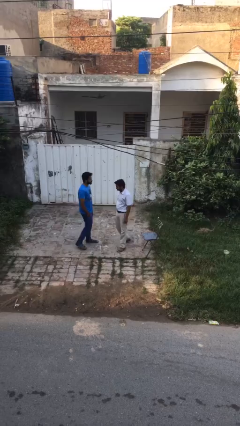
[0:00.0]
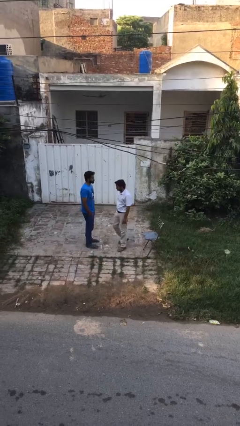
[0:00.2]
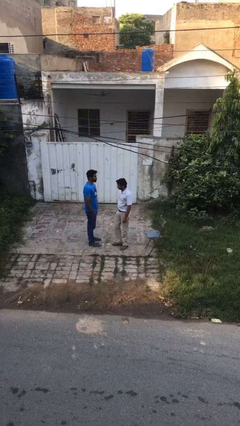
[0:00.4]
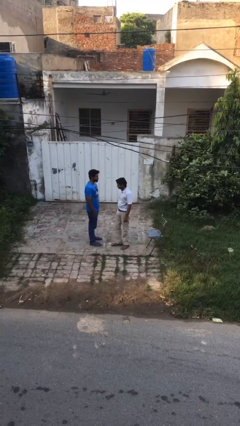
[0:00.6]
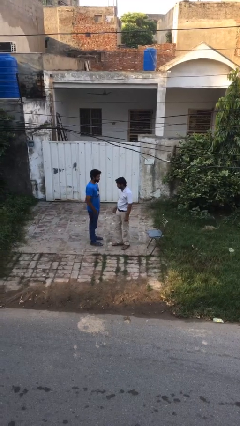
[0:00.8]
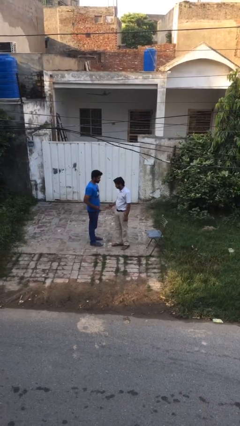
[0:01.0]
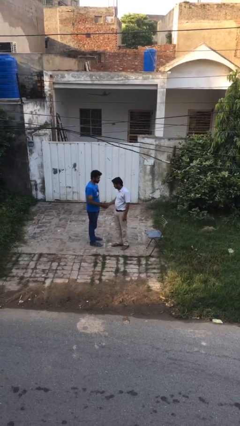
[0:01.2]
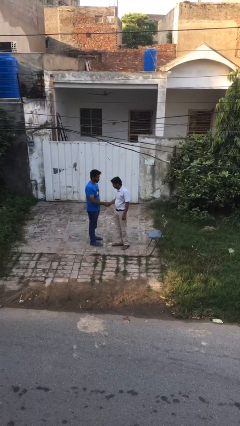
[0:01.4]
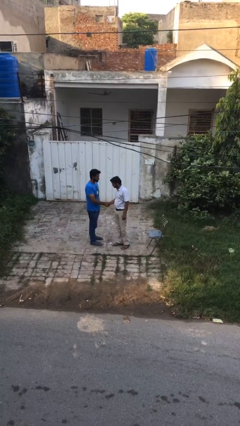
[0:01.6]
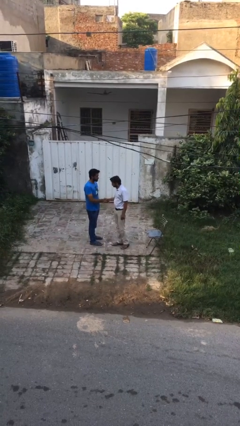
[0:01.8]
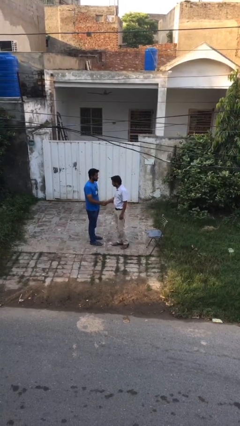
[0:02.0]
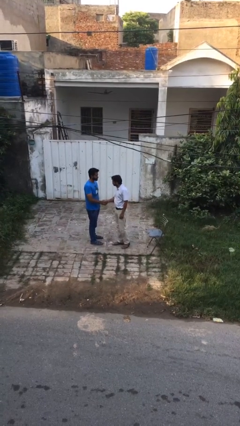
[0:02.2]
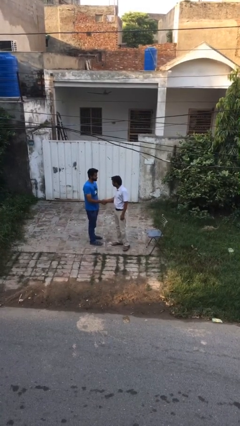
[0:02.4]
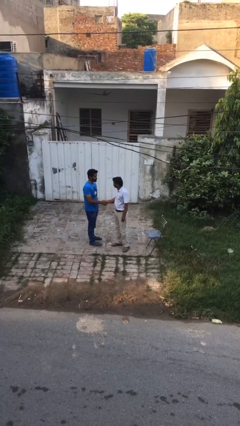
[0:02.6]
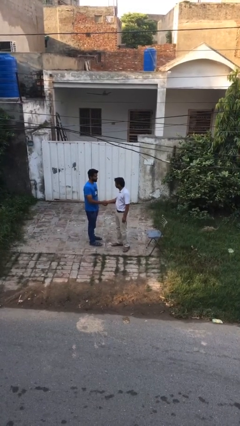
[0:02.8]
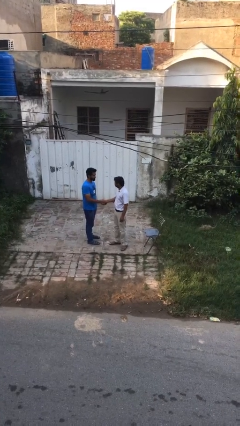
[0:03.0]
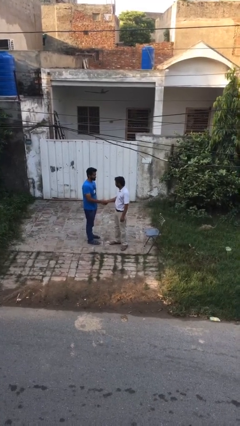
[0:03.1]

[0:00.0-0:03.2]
person shakes hand

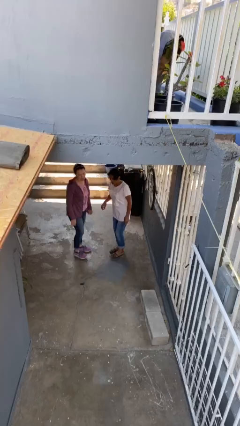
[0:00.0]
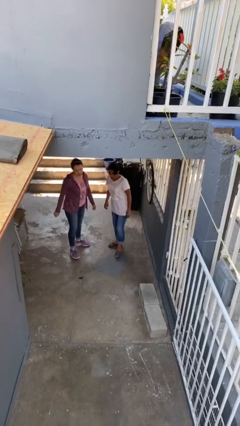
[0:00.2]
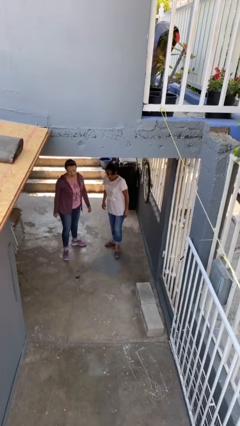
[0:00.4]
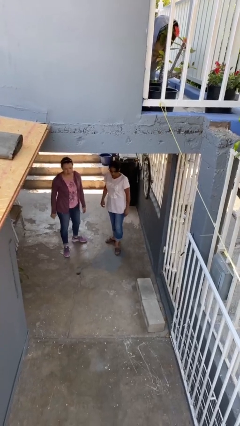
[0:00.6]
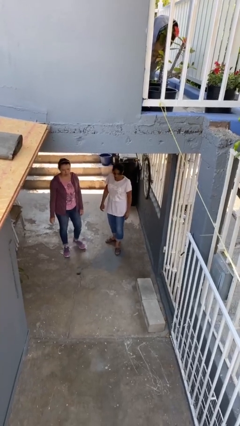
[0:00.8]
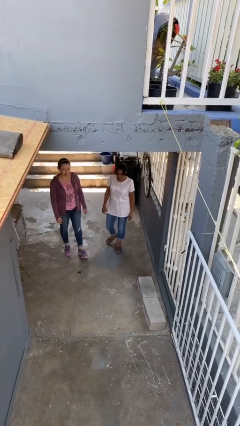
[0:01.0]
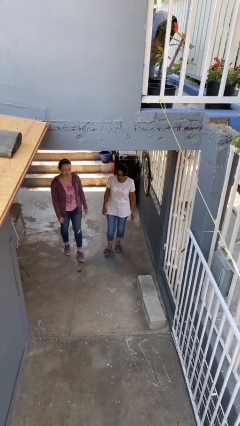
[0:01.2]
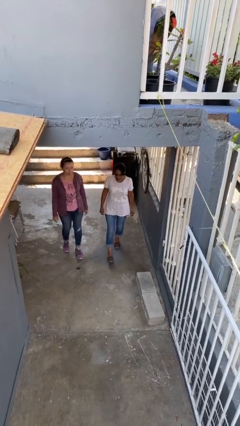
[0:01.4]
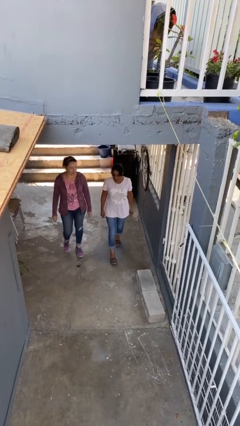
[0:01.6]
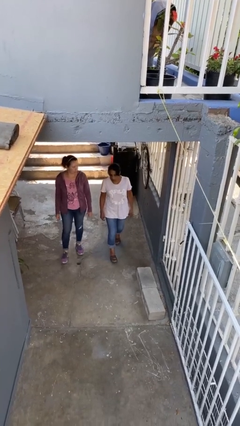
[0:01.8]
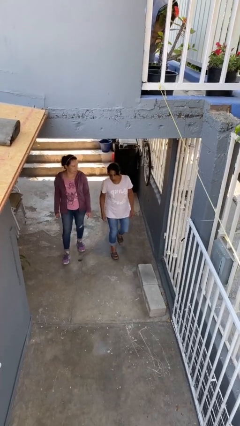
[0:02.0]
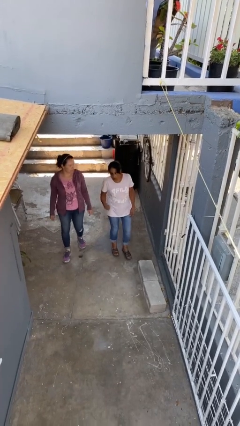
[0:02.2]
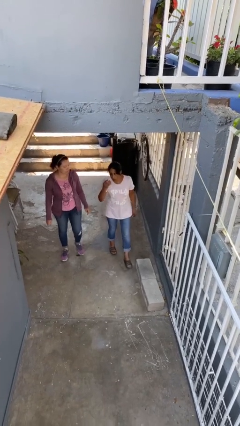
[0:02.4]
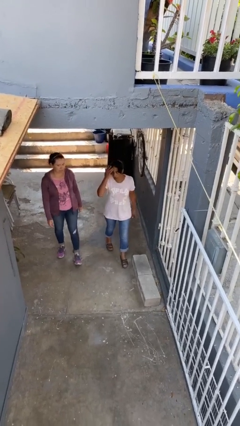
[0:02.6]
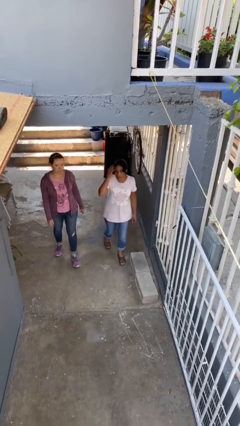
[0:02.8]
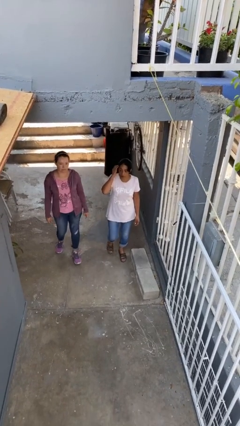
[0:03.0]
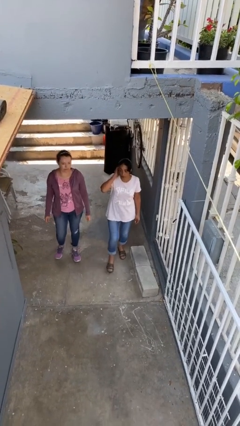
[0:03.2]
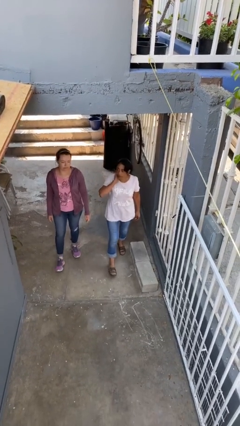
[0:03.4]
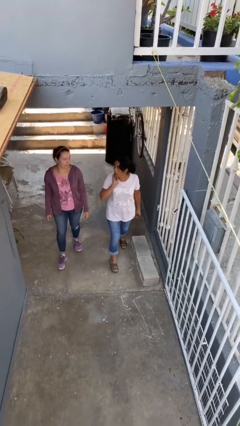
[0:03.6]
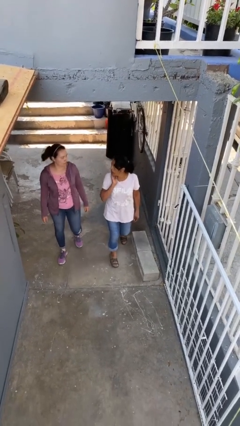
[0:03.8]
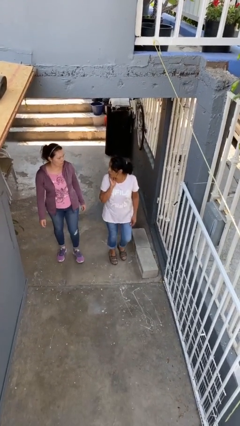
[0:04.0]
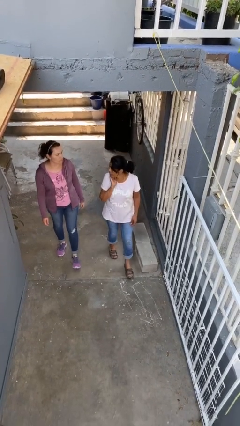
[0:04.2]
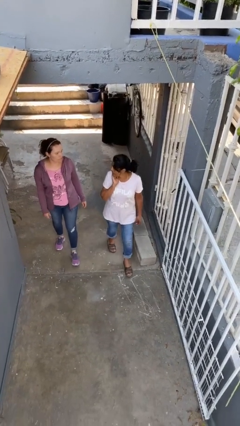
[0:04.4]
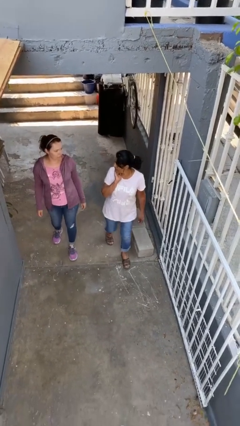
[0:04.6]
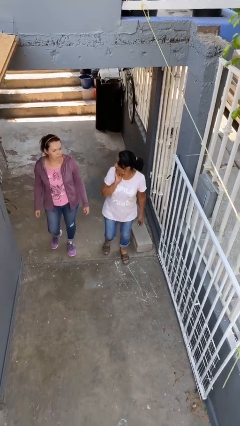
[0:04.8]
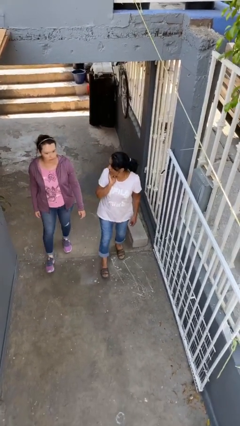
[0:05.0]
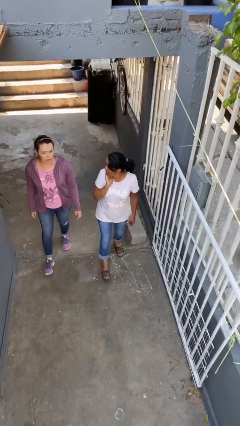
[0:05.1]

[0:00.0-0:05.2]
person talks to person

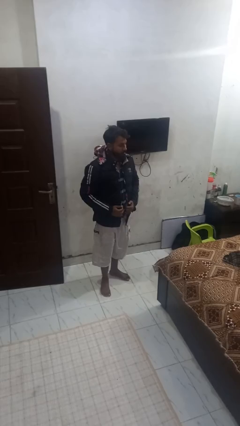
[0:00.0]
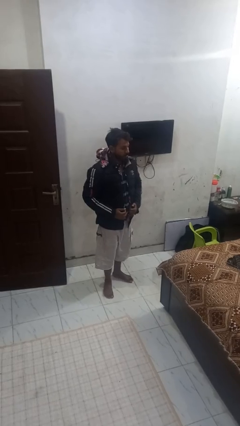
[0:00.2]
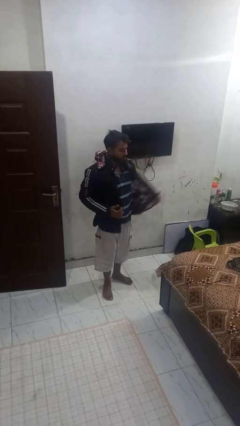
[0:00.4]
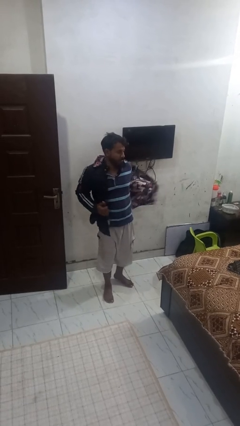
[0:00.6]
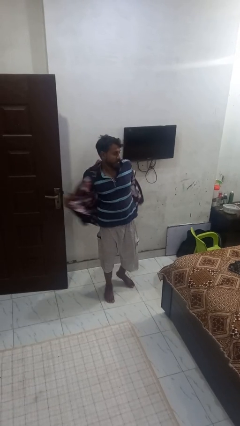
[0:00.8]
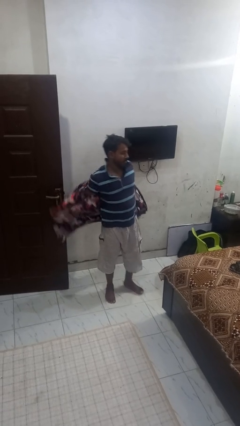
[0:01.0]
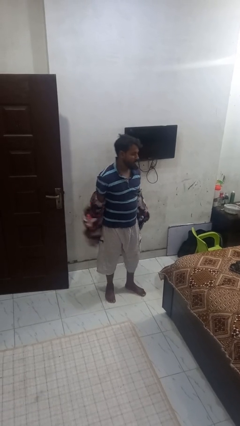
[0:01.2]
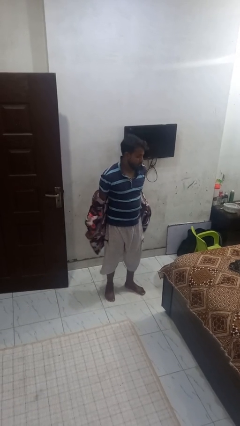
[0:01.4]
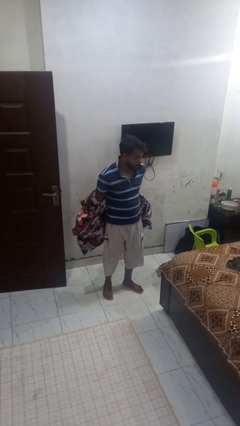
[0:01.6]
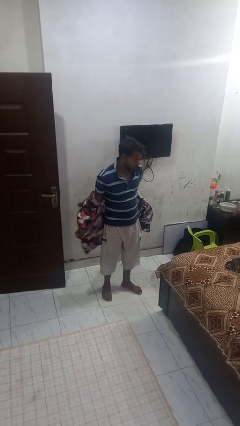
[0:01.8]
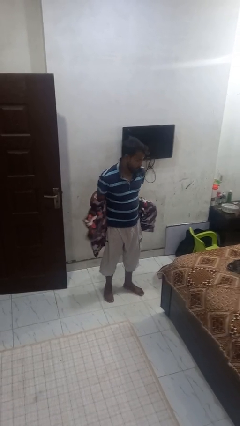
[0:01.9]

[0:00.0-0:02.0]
person takes off jacket

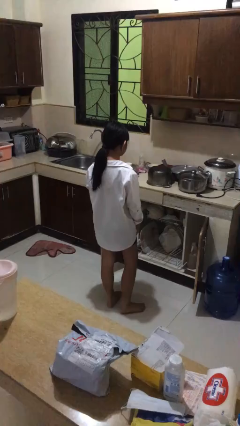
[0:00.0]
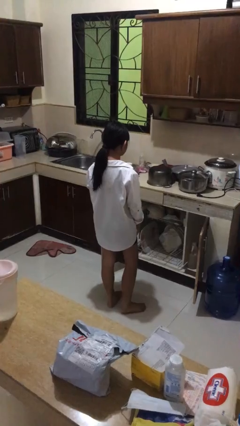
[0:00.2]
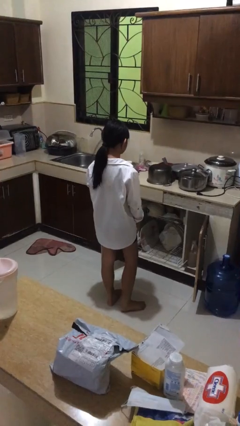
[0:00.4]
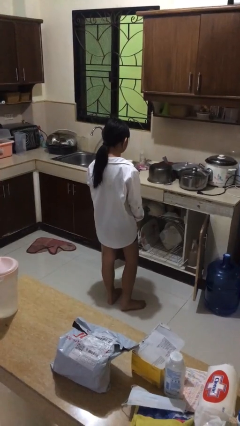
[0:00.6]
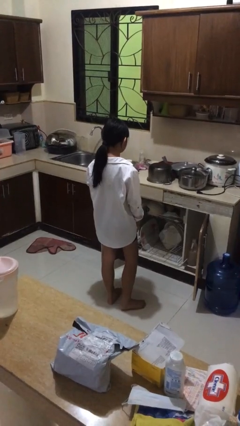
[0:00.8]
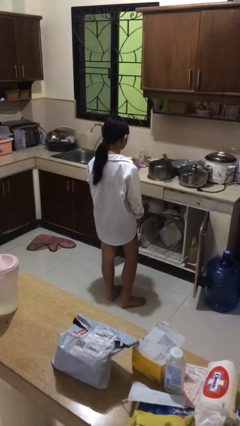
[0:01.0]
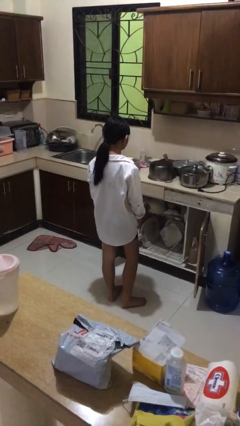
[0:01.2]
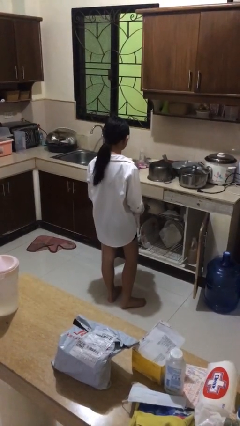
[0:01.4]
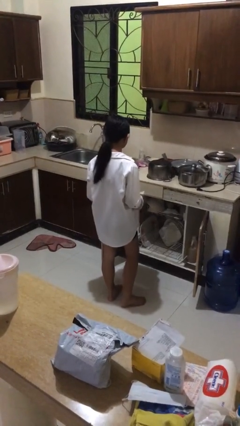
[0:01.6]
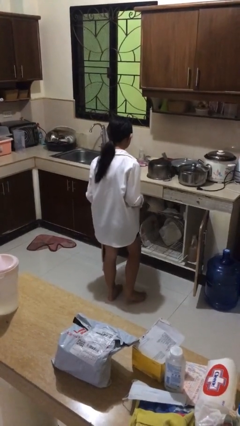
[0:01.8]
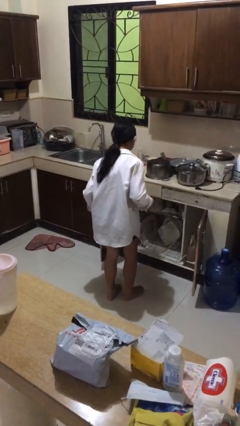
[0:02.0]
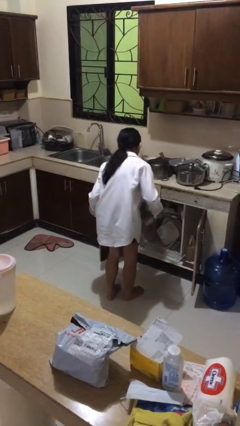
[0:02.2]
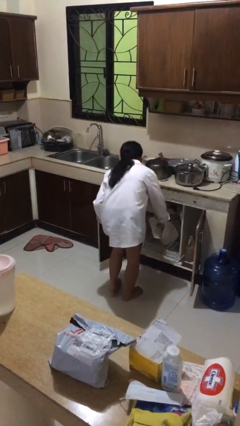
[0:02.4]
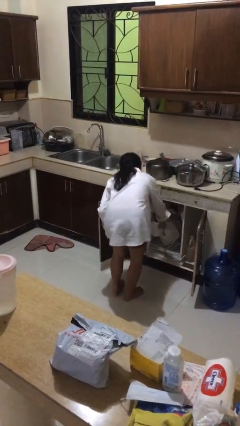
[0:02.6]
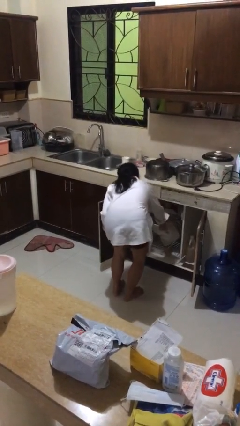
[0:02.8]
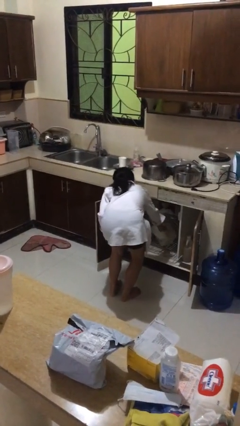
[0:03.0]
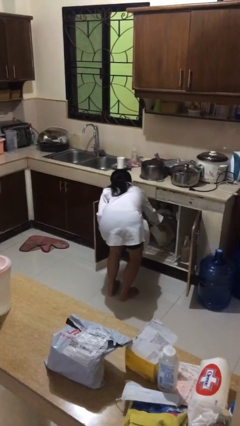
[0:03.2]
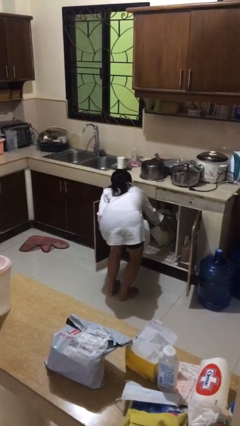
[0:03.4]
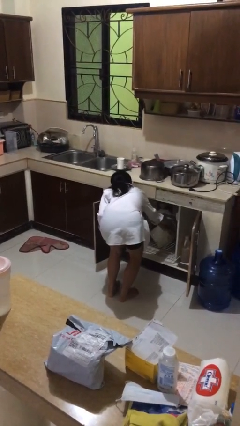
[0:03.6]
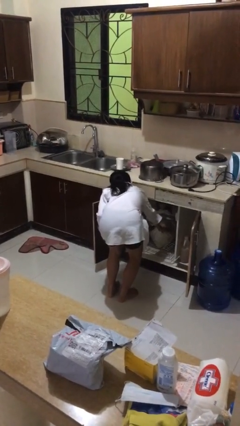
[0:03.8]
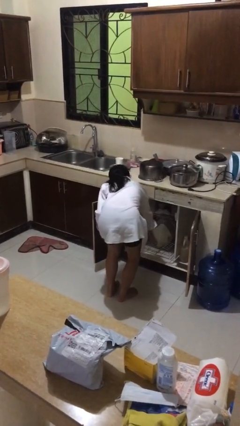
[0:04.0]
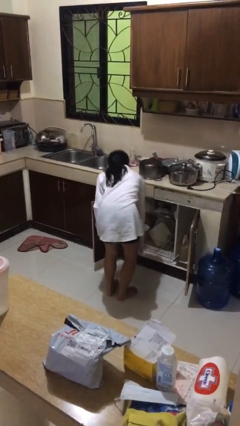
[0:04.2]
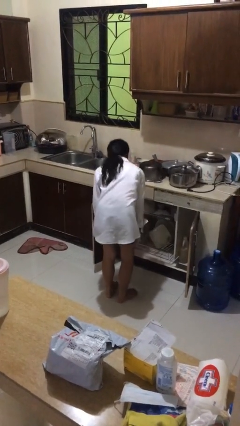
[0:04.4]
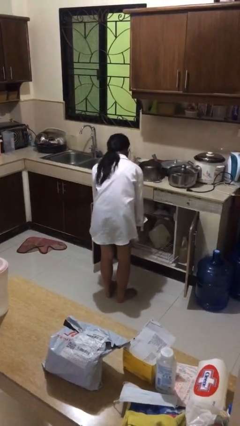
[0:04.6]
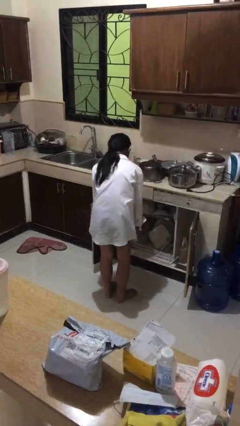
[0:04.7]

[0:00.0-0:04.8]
person loads dishwasher

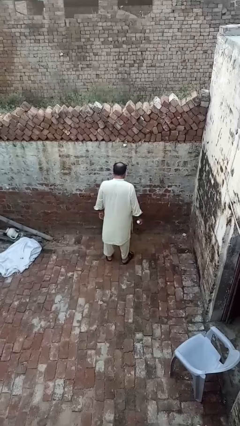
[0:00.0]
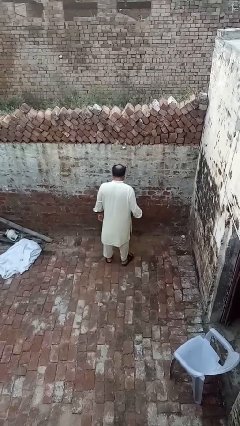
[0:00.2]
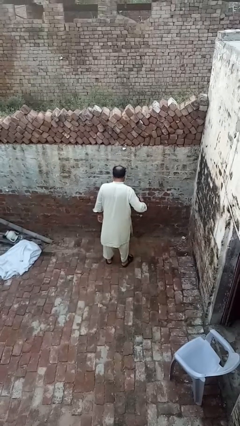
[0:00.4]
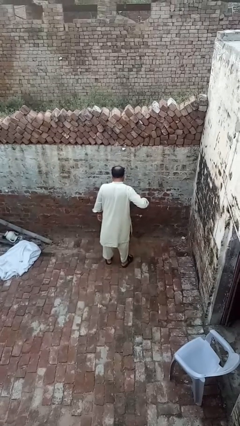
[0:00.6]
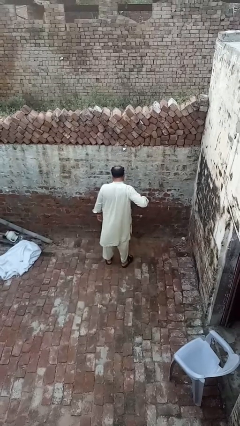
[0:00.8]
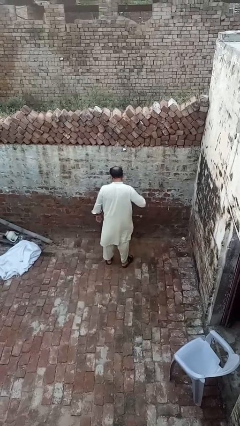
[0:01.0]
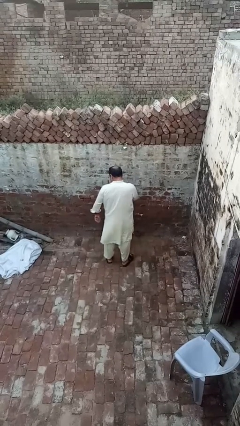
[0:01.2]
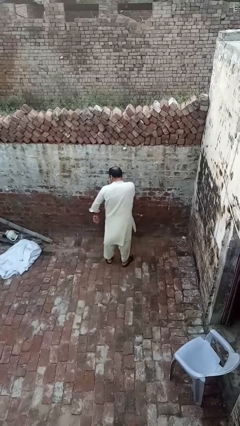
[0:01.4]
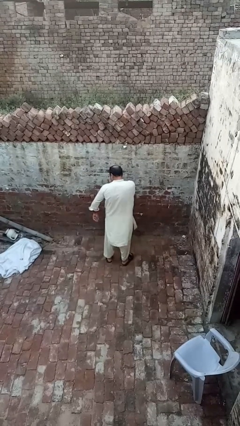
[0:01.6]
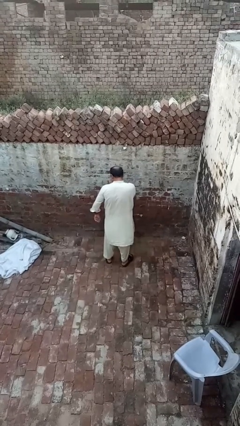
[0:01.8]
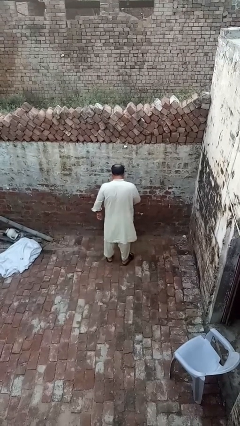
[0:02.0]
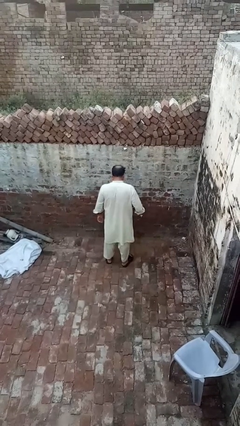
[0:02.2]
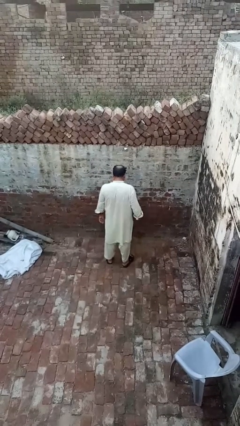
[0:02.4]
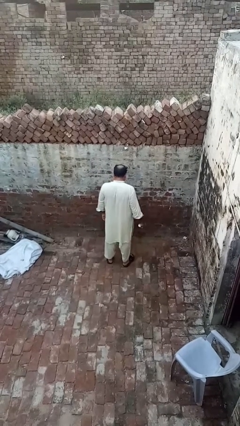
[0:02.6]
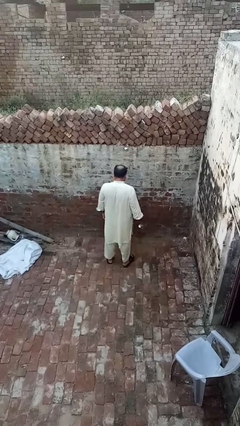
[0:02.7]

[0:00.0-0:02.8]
person applies deodorant
